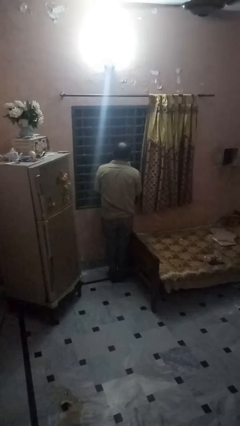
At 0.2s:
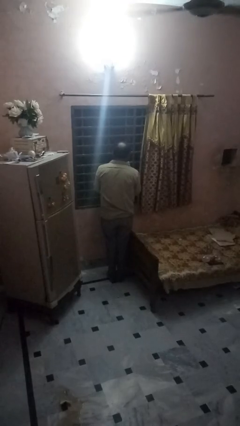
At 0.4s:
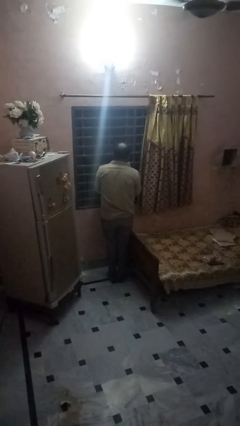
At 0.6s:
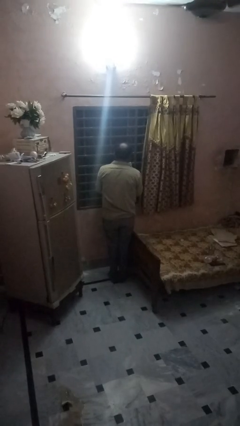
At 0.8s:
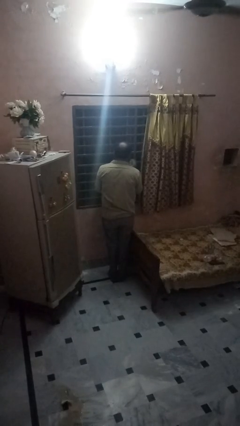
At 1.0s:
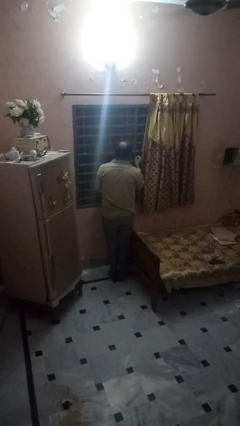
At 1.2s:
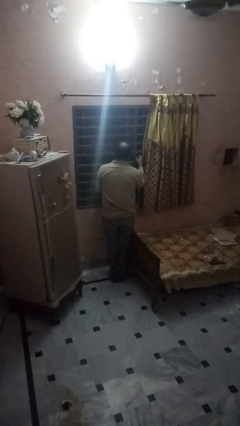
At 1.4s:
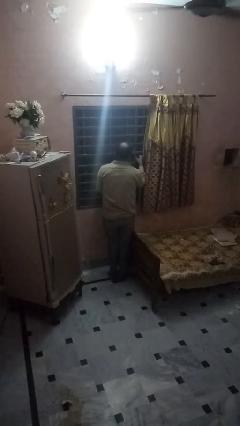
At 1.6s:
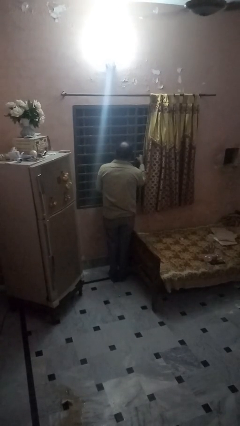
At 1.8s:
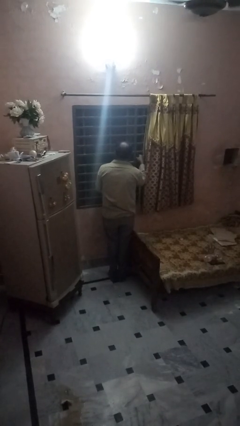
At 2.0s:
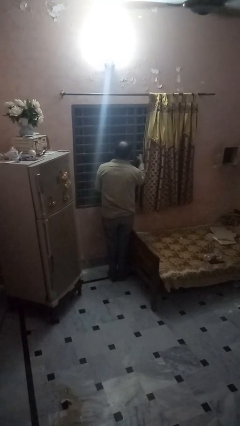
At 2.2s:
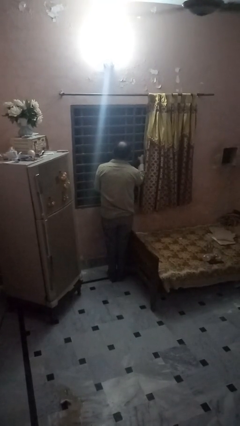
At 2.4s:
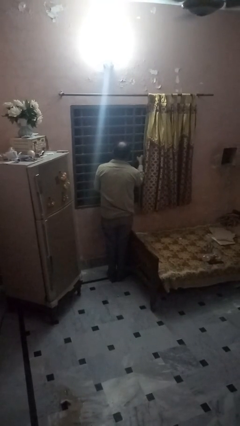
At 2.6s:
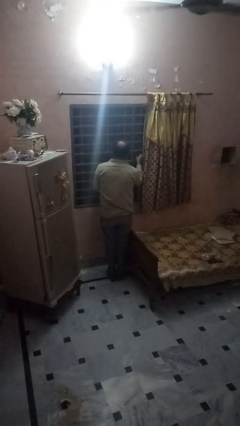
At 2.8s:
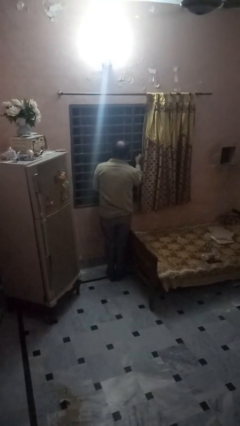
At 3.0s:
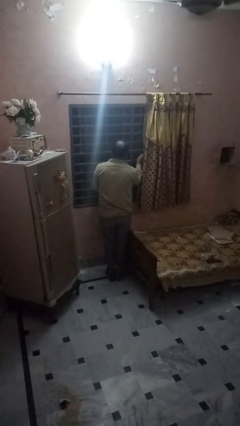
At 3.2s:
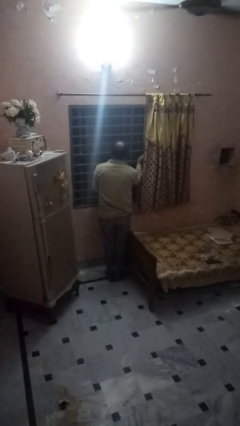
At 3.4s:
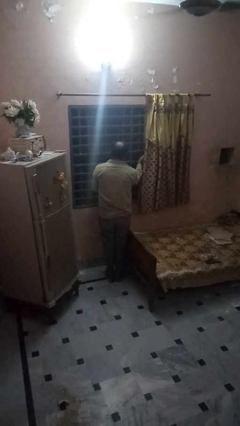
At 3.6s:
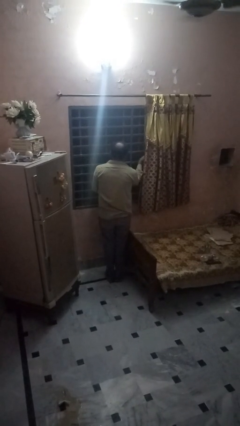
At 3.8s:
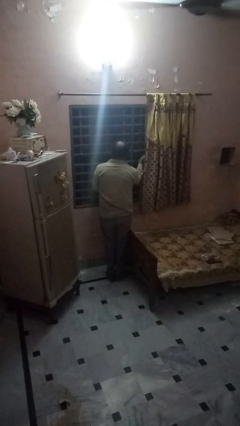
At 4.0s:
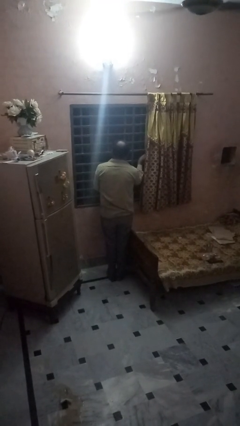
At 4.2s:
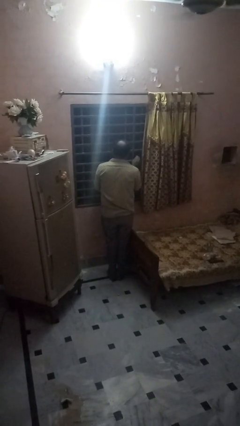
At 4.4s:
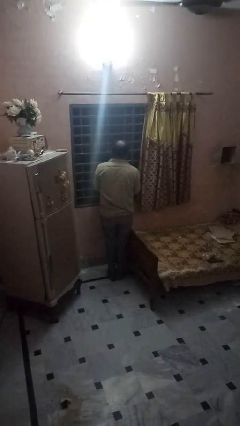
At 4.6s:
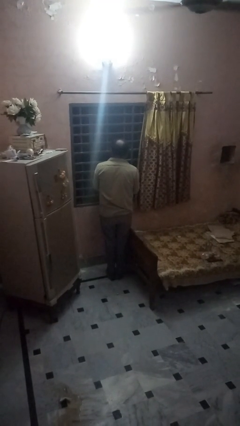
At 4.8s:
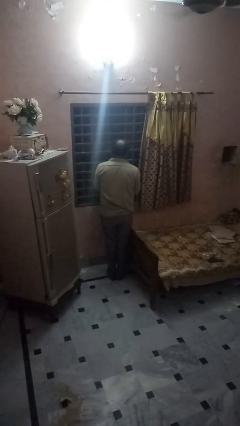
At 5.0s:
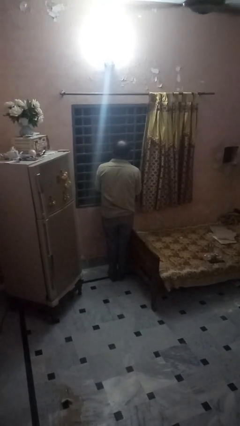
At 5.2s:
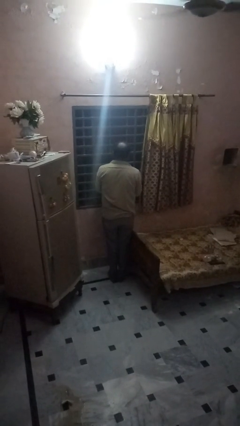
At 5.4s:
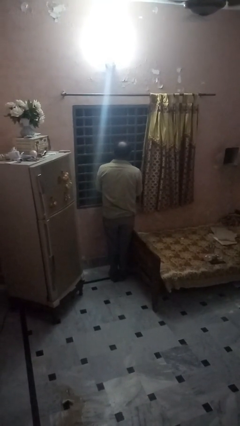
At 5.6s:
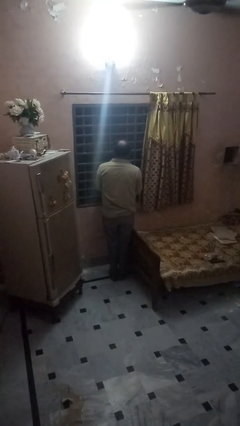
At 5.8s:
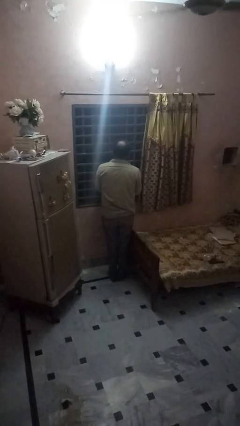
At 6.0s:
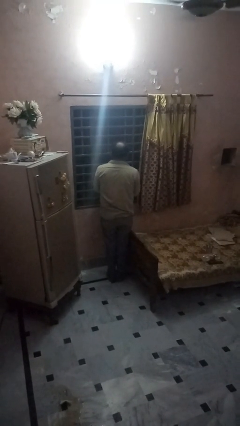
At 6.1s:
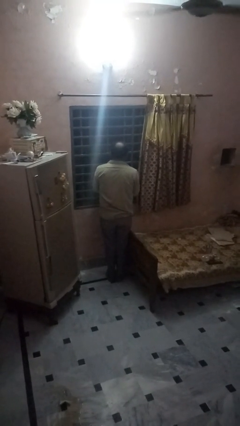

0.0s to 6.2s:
person opens home window

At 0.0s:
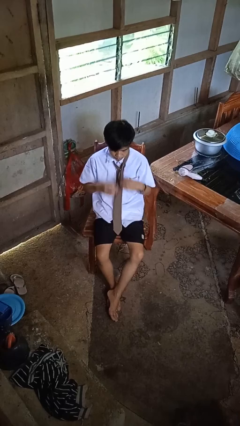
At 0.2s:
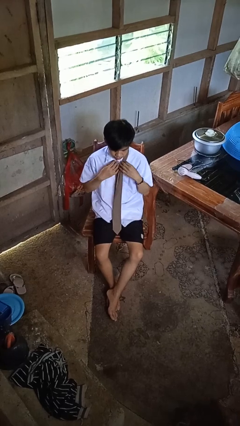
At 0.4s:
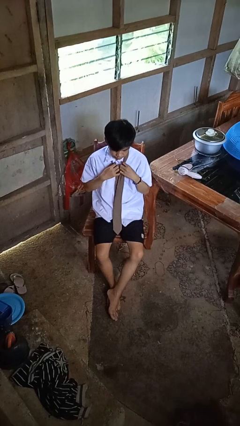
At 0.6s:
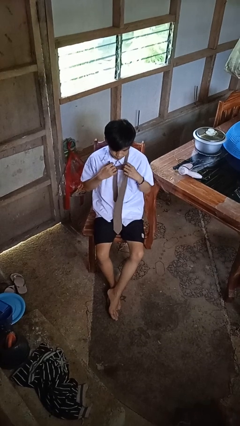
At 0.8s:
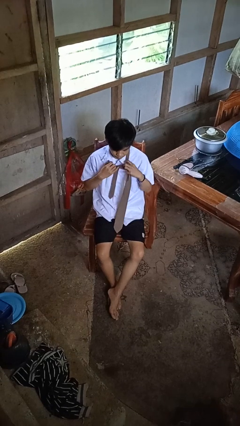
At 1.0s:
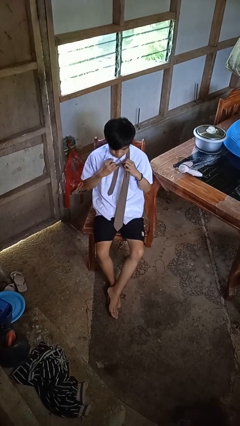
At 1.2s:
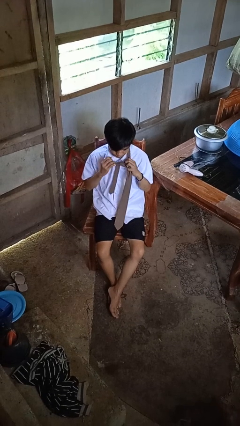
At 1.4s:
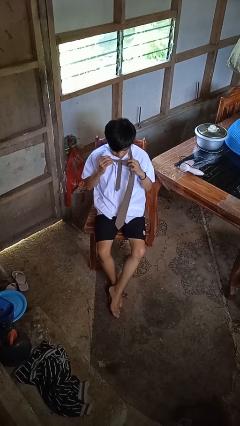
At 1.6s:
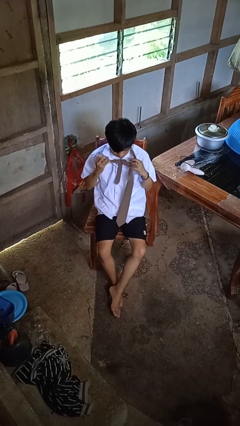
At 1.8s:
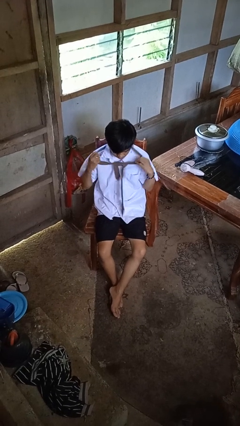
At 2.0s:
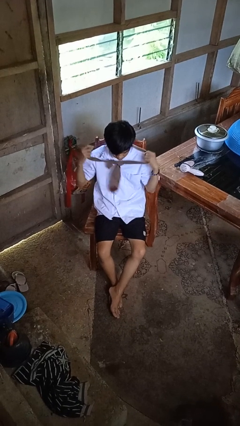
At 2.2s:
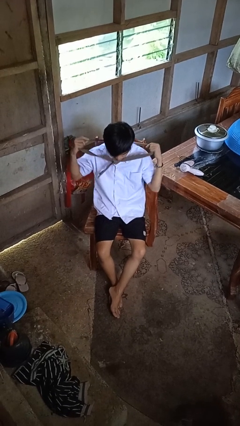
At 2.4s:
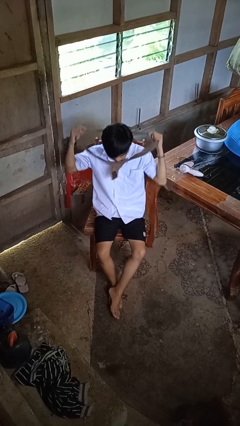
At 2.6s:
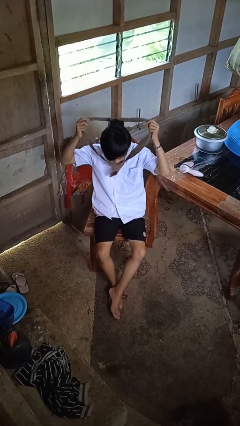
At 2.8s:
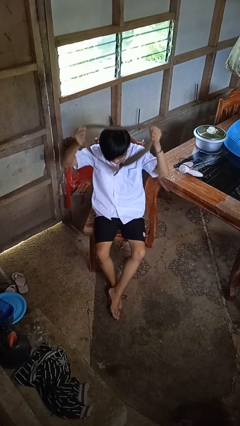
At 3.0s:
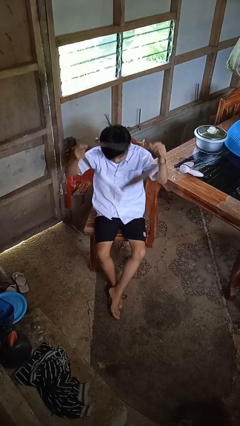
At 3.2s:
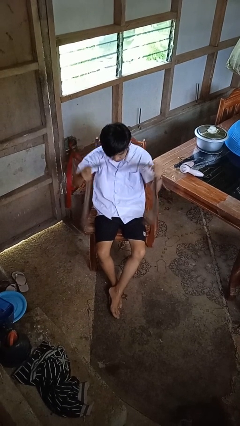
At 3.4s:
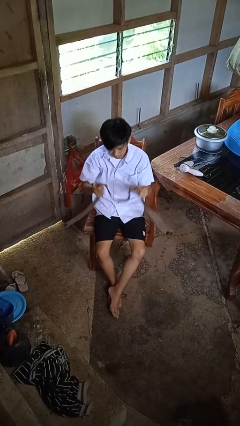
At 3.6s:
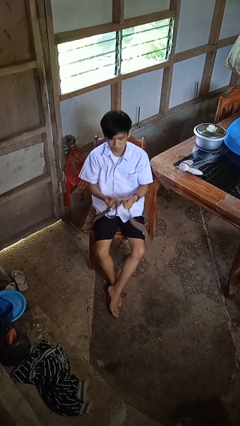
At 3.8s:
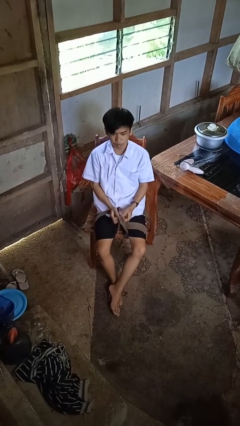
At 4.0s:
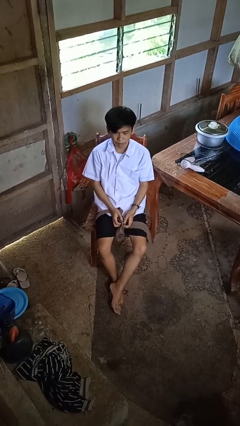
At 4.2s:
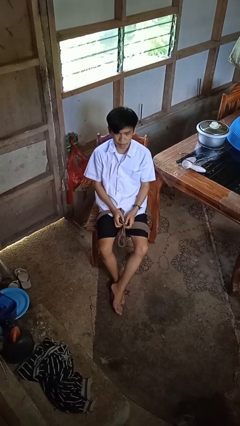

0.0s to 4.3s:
person takes off necktie

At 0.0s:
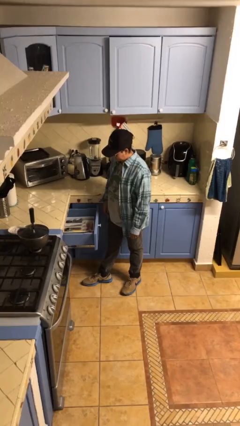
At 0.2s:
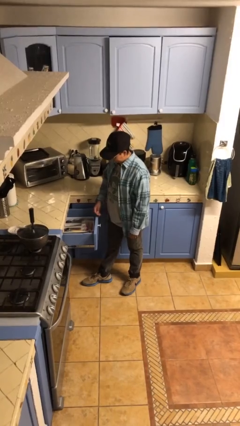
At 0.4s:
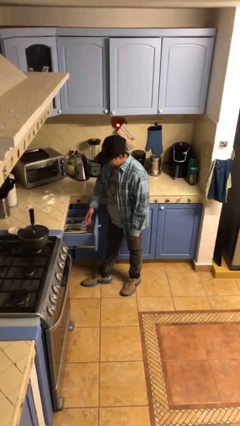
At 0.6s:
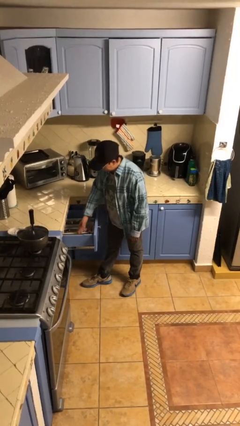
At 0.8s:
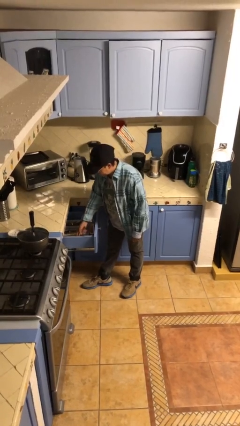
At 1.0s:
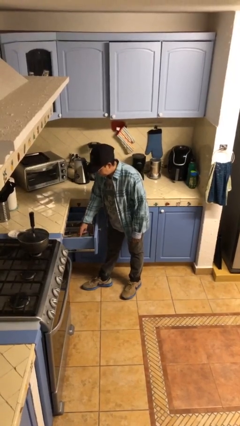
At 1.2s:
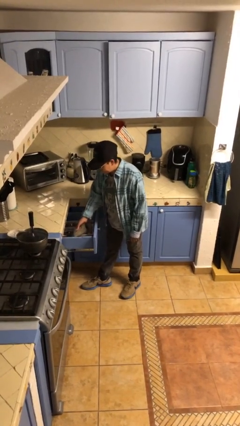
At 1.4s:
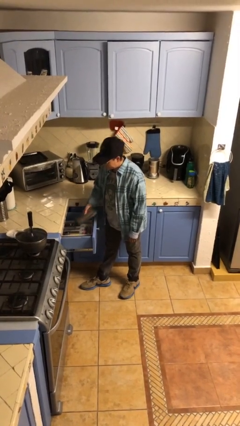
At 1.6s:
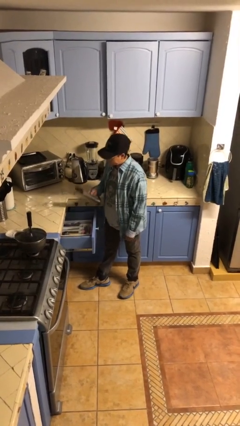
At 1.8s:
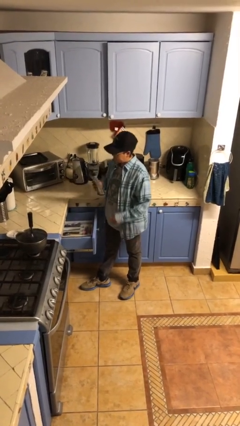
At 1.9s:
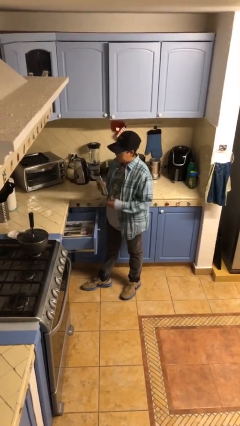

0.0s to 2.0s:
person takes object from kitchen drawer

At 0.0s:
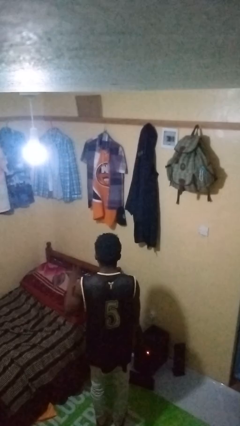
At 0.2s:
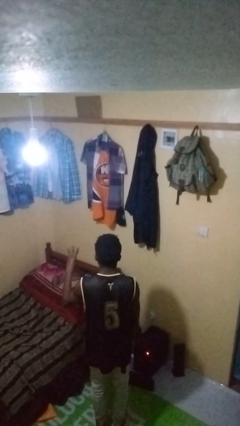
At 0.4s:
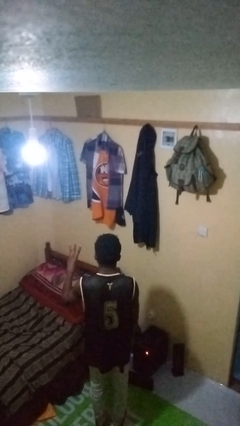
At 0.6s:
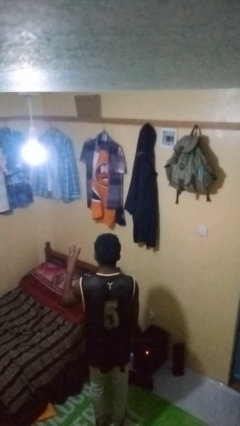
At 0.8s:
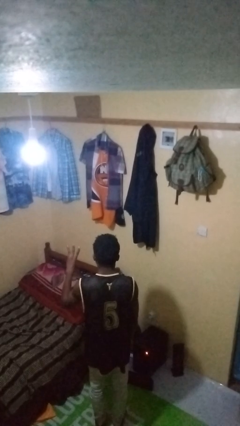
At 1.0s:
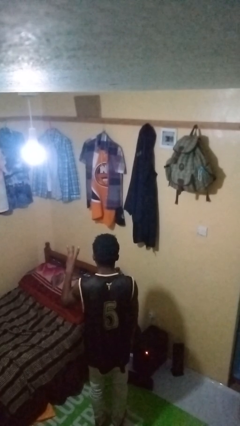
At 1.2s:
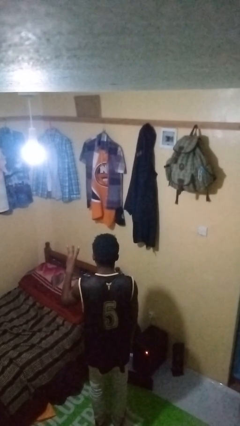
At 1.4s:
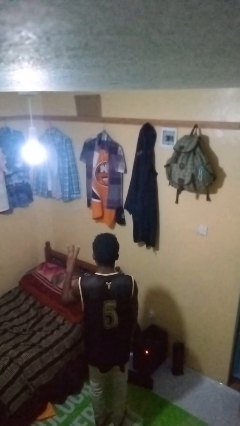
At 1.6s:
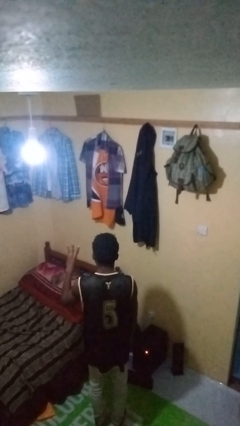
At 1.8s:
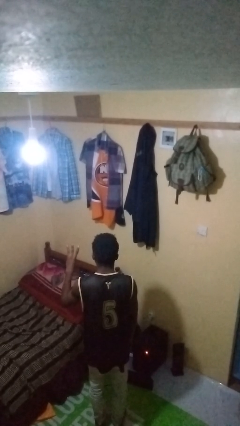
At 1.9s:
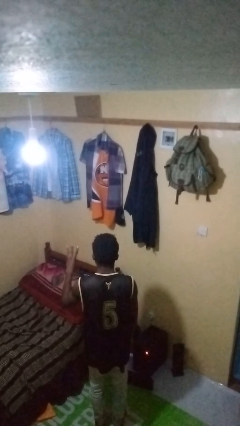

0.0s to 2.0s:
person gestures number three

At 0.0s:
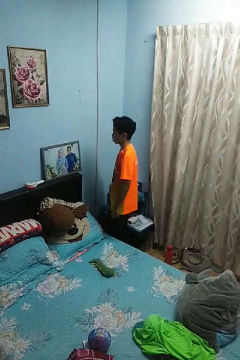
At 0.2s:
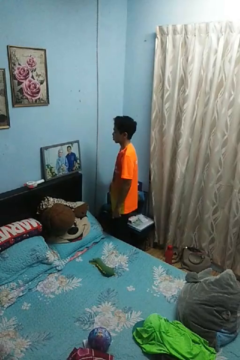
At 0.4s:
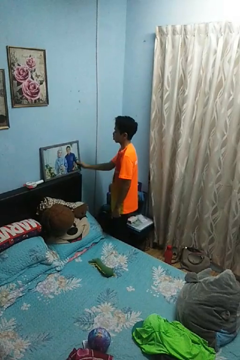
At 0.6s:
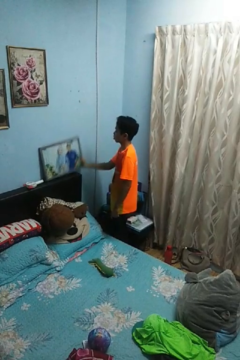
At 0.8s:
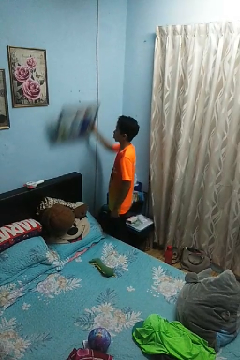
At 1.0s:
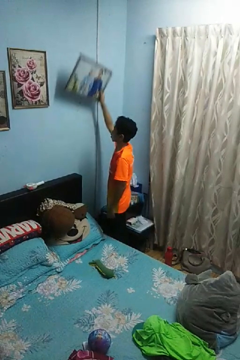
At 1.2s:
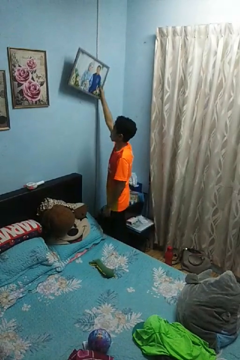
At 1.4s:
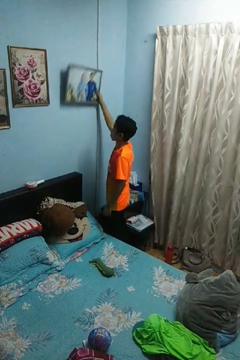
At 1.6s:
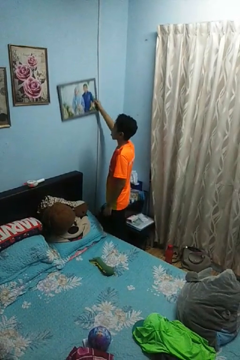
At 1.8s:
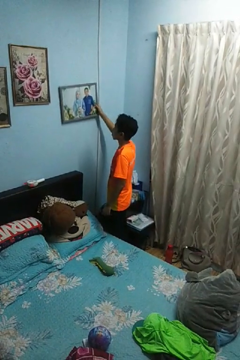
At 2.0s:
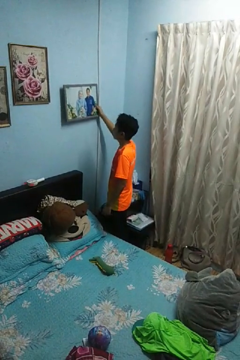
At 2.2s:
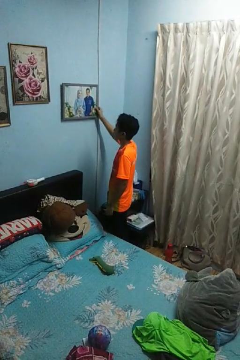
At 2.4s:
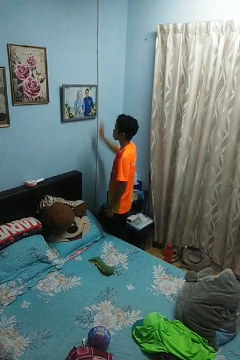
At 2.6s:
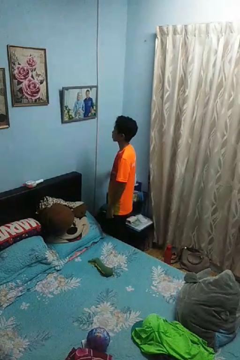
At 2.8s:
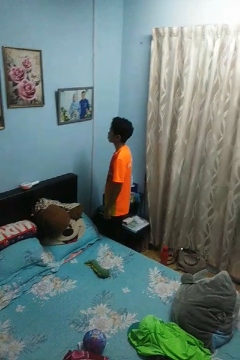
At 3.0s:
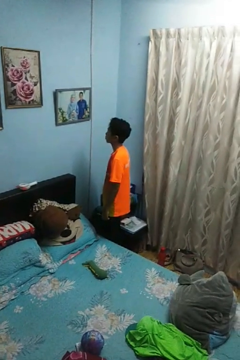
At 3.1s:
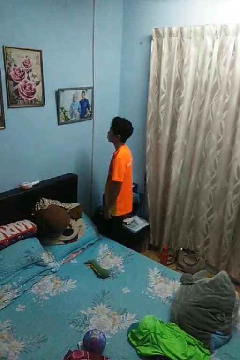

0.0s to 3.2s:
person puts up picture frame
